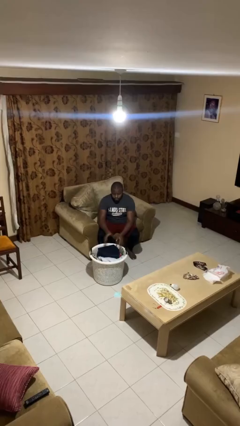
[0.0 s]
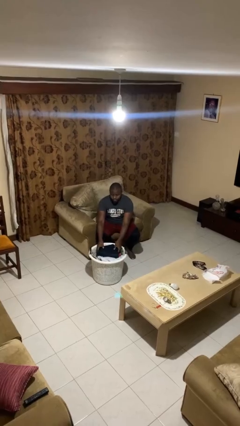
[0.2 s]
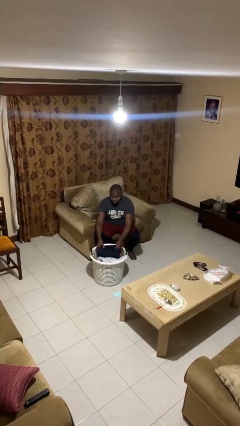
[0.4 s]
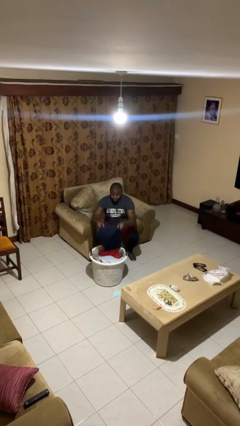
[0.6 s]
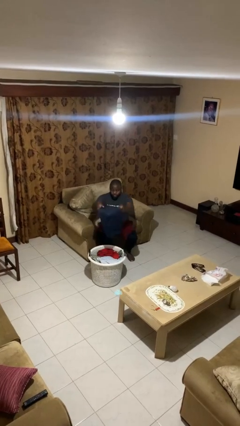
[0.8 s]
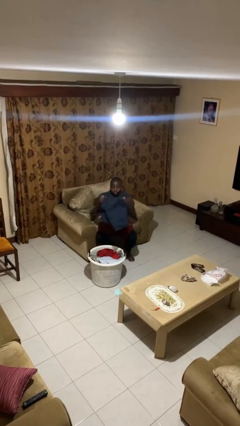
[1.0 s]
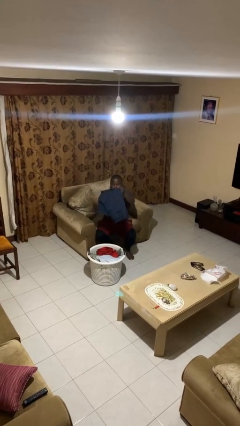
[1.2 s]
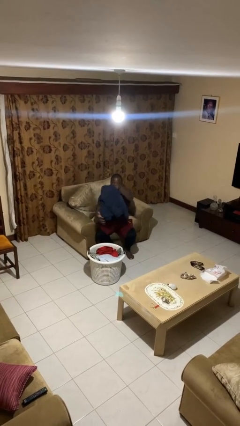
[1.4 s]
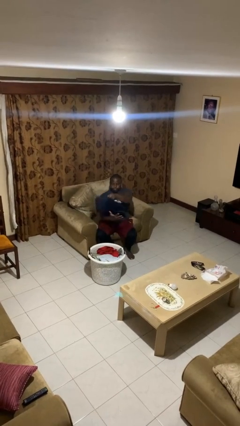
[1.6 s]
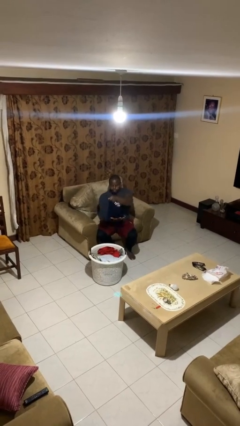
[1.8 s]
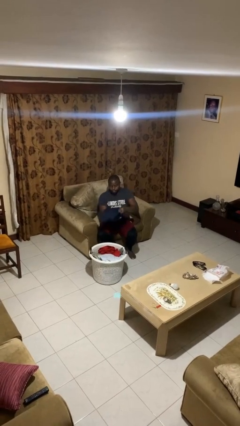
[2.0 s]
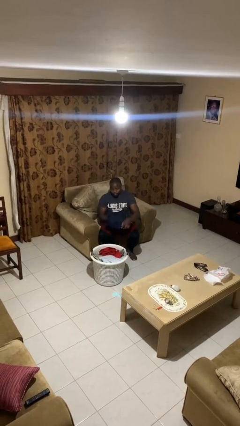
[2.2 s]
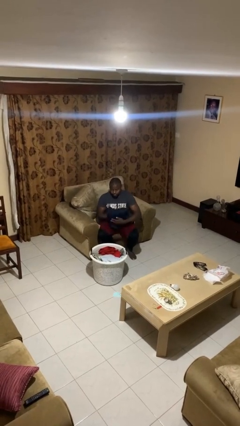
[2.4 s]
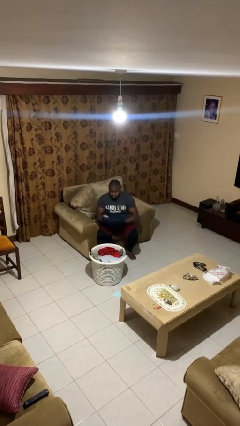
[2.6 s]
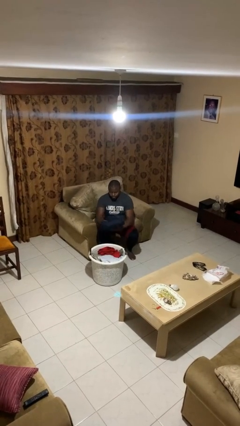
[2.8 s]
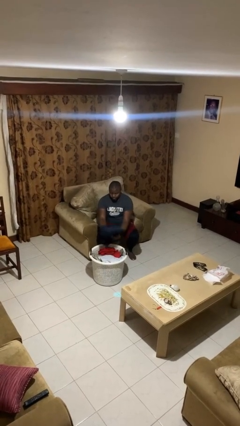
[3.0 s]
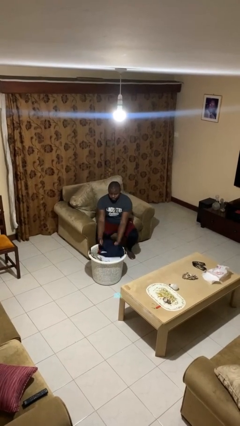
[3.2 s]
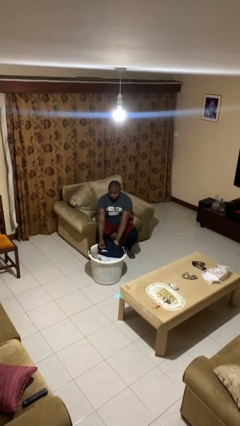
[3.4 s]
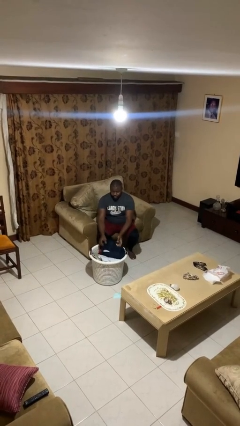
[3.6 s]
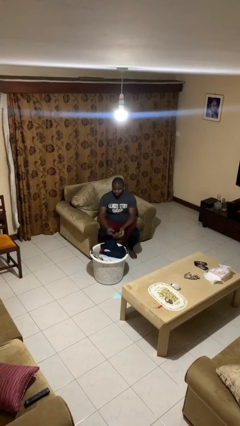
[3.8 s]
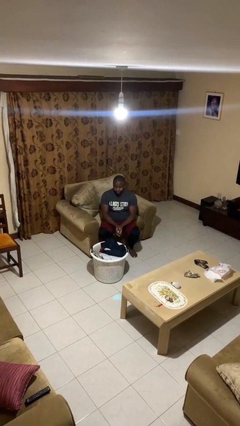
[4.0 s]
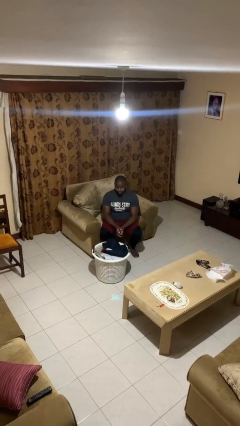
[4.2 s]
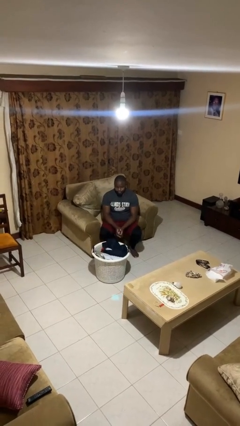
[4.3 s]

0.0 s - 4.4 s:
person folds pants

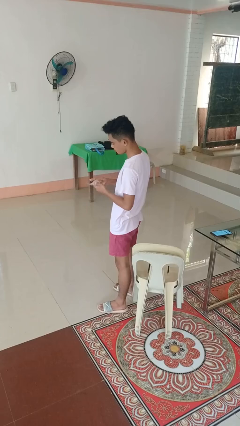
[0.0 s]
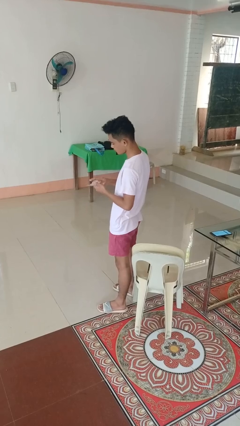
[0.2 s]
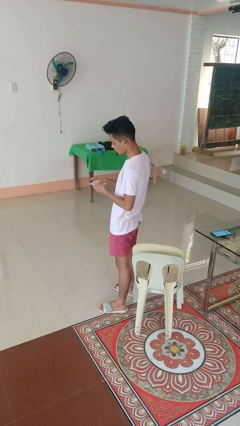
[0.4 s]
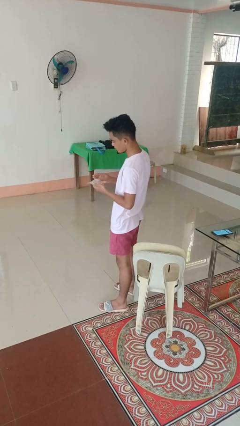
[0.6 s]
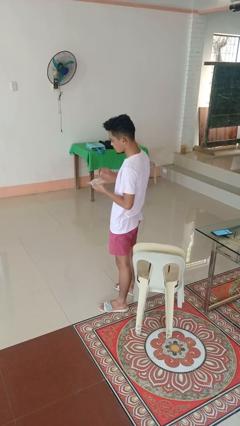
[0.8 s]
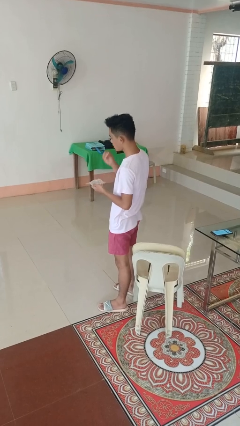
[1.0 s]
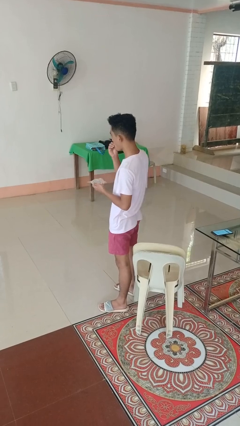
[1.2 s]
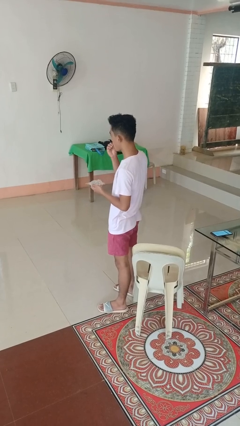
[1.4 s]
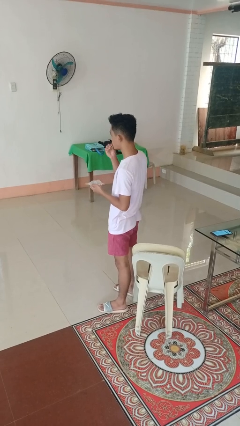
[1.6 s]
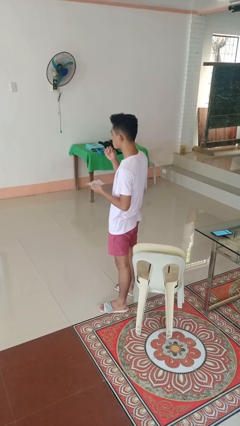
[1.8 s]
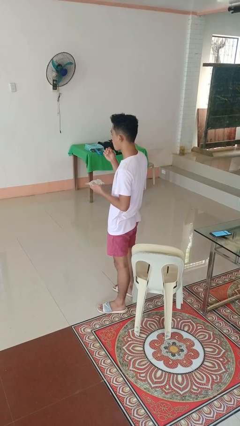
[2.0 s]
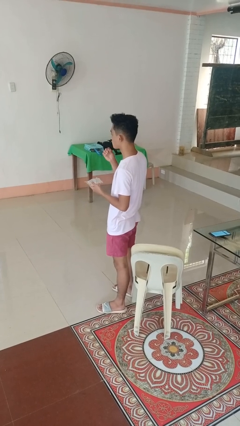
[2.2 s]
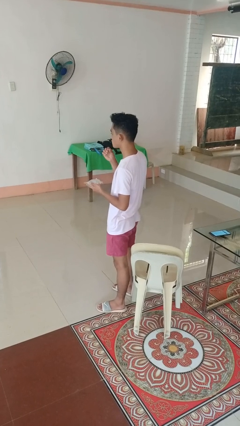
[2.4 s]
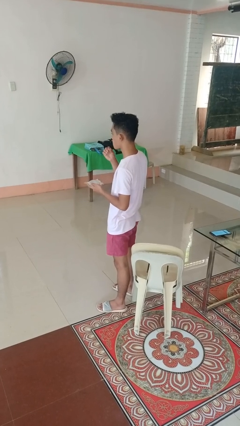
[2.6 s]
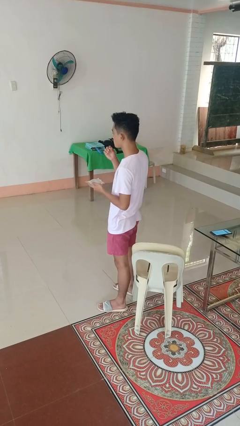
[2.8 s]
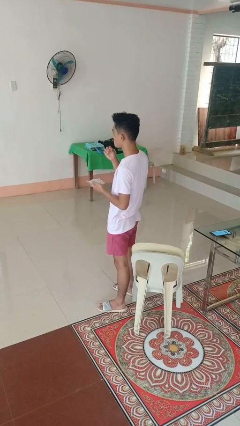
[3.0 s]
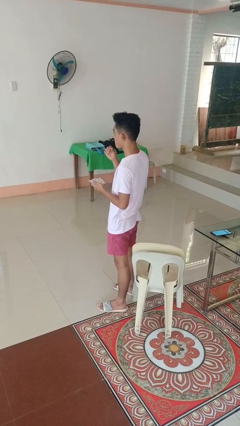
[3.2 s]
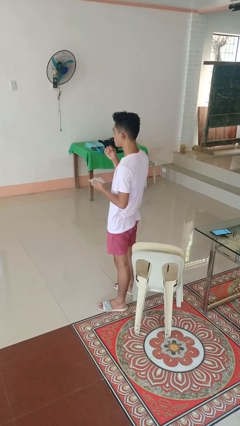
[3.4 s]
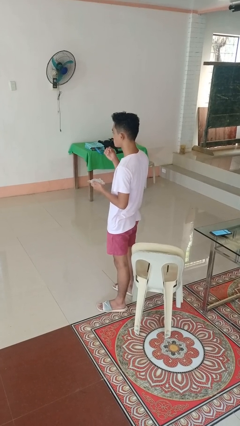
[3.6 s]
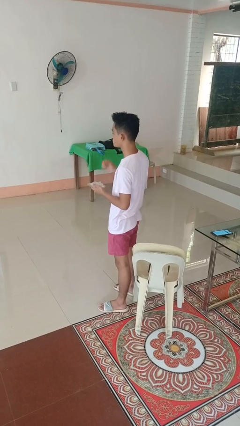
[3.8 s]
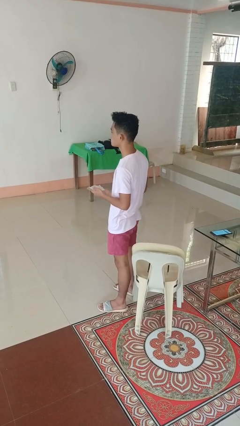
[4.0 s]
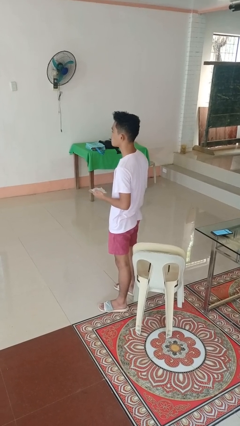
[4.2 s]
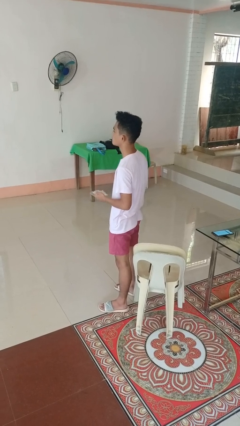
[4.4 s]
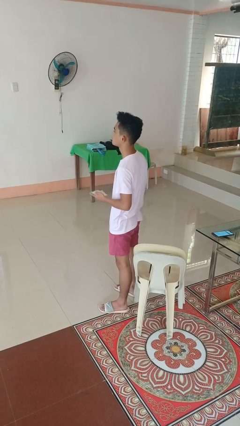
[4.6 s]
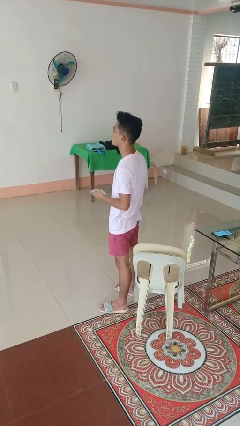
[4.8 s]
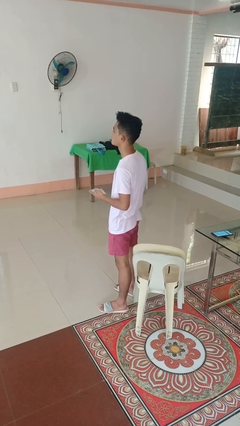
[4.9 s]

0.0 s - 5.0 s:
person eats snack from bag

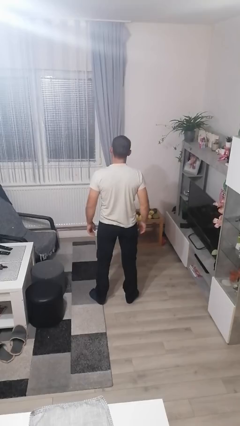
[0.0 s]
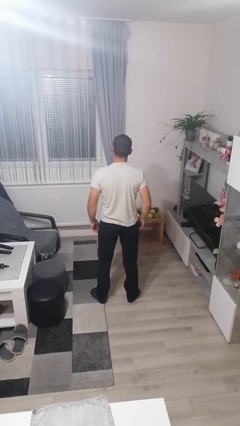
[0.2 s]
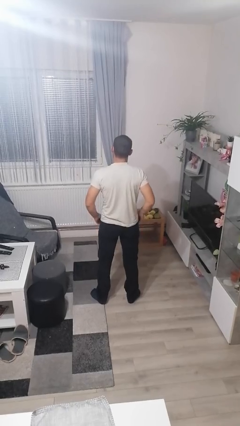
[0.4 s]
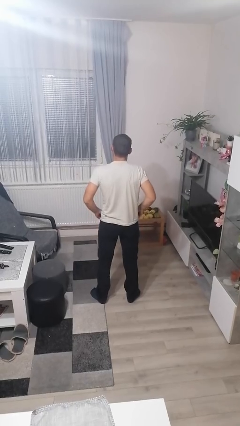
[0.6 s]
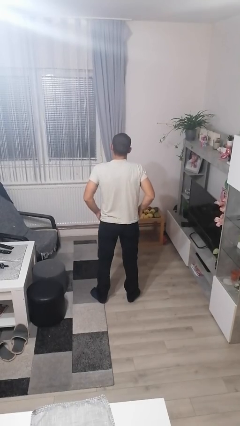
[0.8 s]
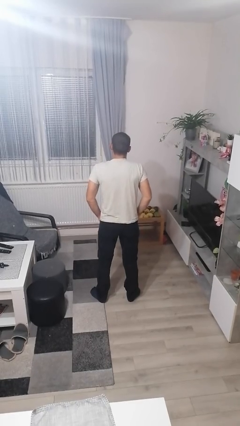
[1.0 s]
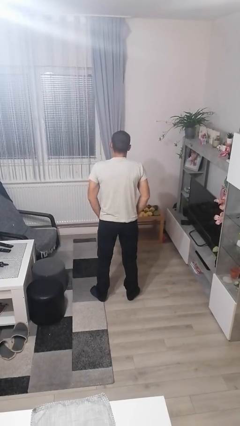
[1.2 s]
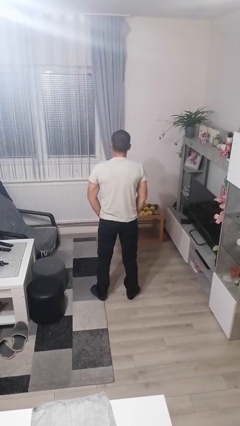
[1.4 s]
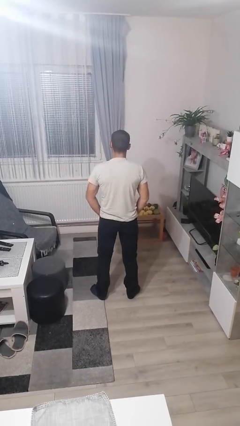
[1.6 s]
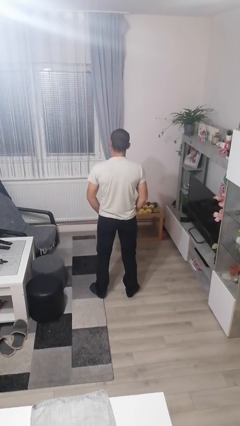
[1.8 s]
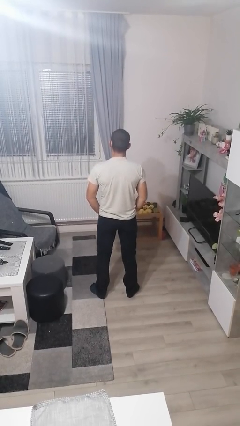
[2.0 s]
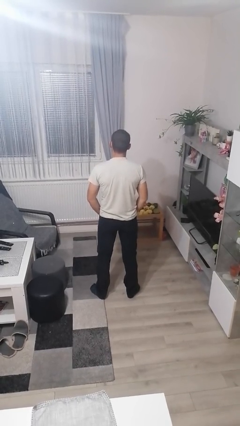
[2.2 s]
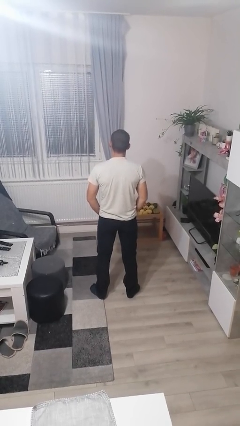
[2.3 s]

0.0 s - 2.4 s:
person puts hands in back pockets

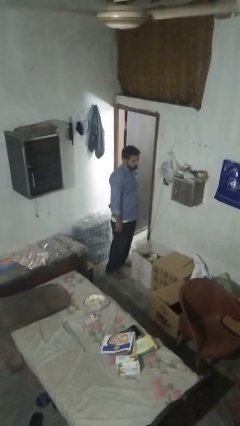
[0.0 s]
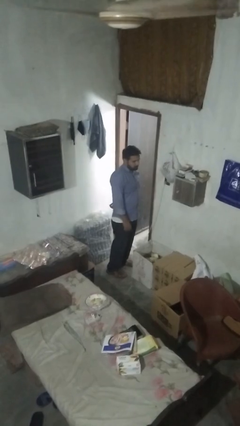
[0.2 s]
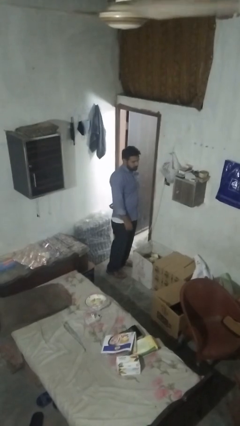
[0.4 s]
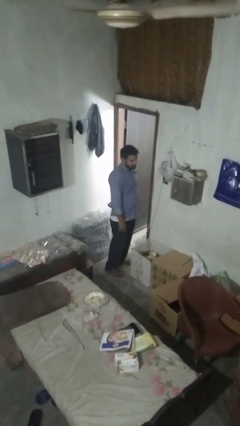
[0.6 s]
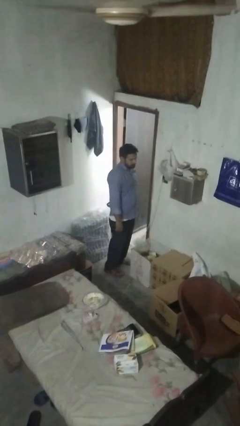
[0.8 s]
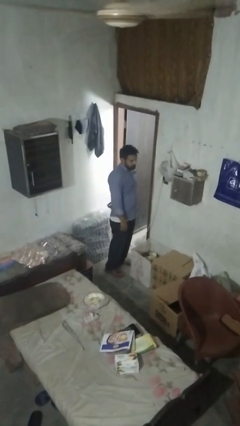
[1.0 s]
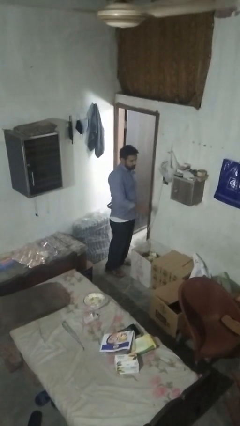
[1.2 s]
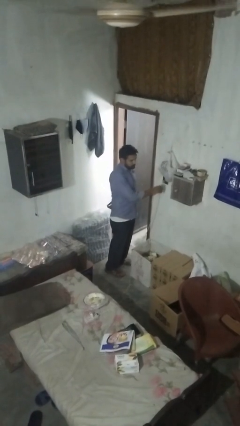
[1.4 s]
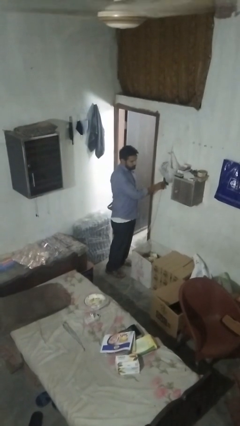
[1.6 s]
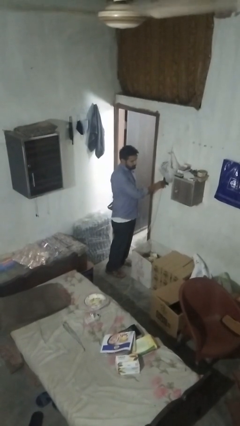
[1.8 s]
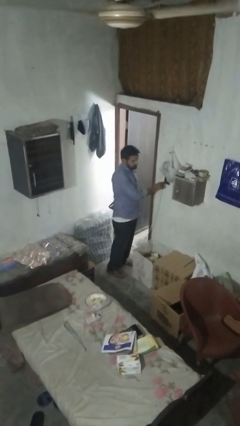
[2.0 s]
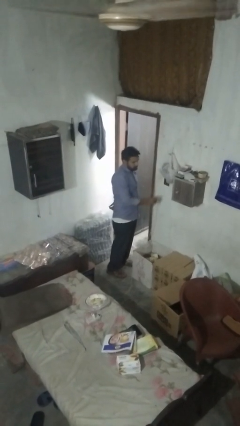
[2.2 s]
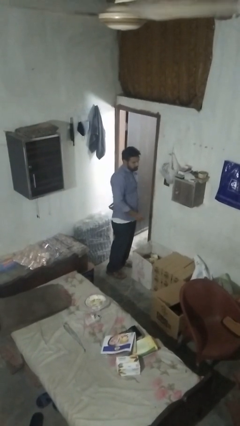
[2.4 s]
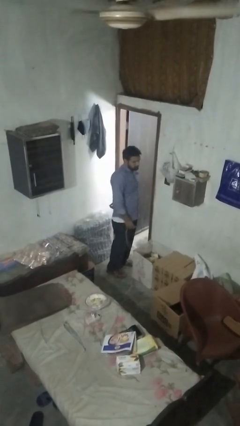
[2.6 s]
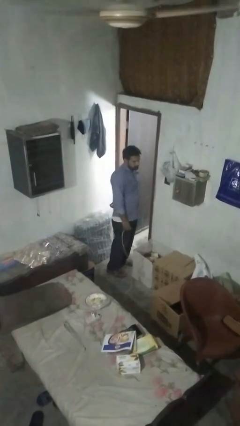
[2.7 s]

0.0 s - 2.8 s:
person unplugs from electrical socket

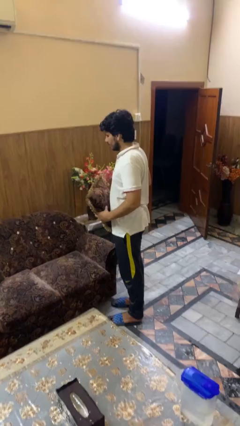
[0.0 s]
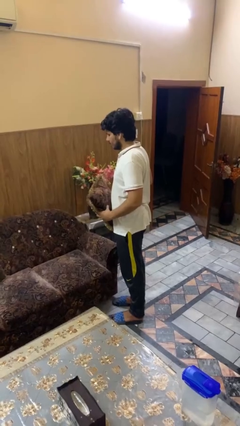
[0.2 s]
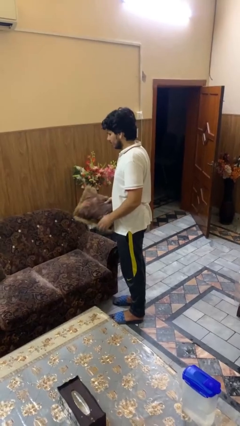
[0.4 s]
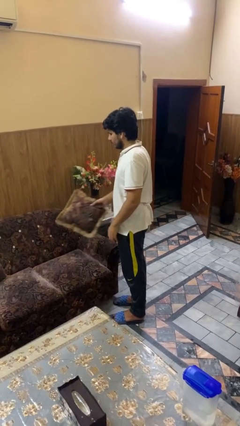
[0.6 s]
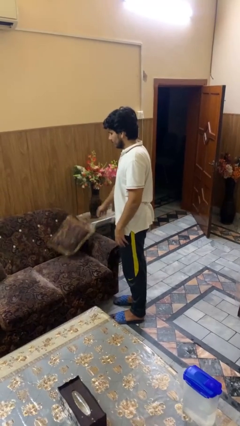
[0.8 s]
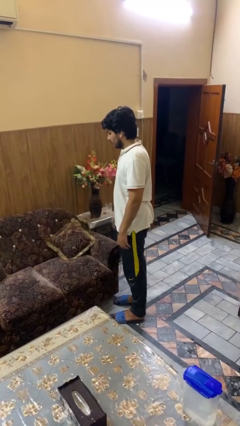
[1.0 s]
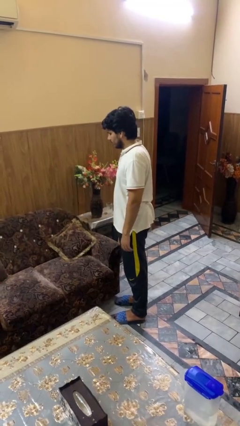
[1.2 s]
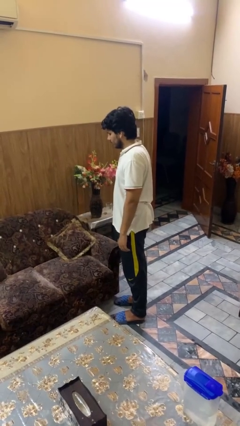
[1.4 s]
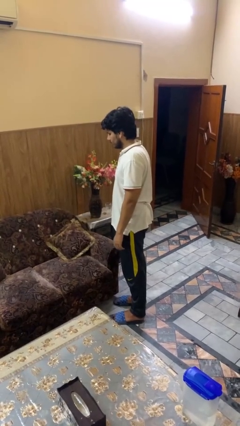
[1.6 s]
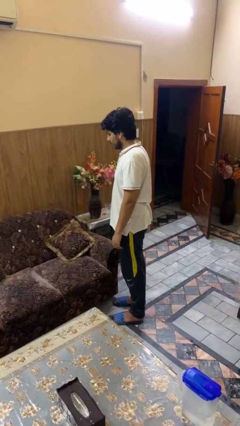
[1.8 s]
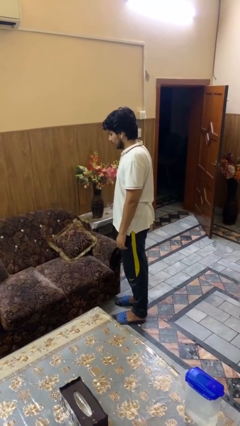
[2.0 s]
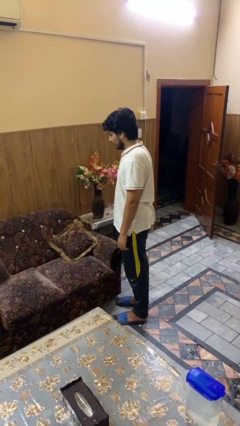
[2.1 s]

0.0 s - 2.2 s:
person puts down object on couch

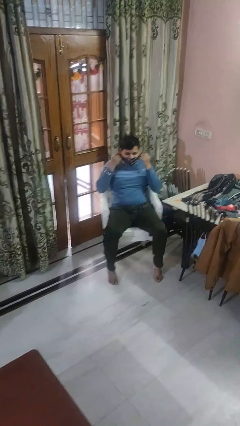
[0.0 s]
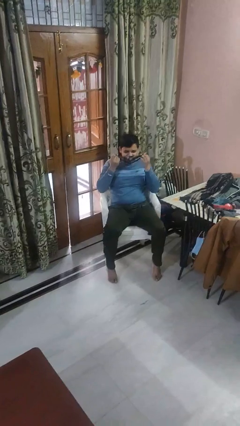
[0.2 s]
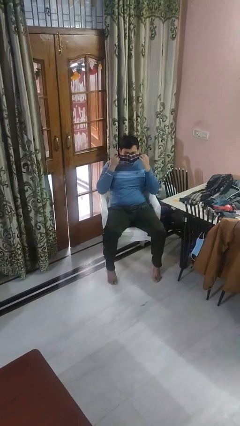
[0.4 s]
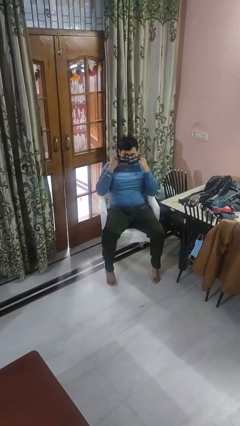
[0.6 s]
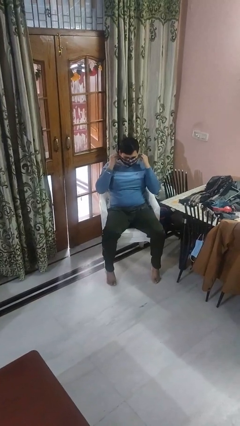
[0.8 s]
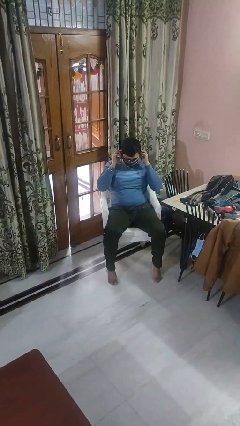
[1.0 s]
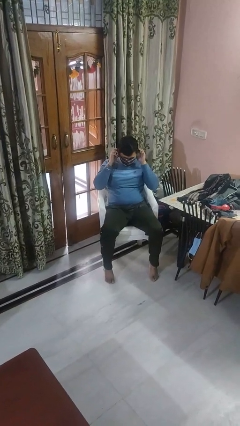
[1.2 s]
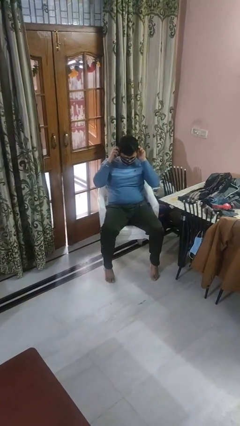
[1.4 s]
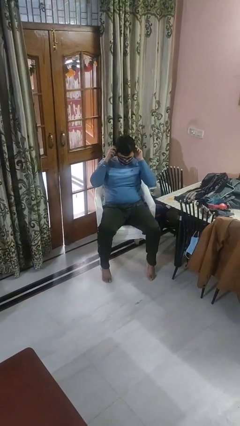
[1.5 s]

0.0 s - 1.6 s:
person puts on facemask
